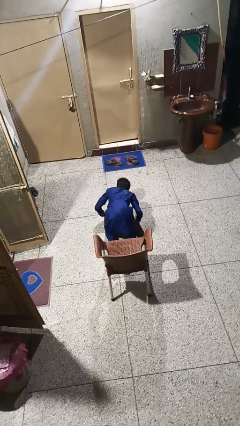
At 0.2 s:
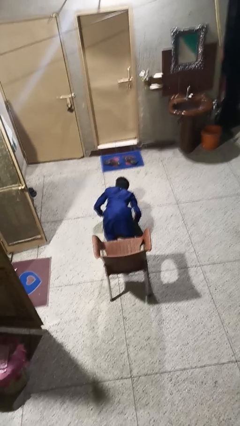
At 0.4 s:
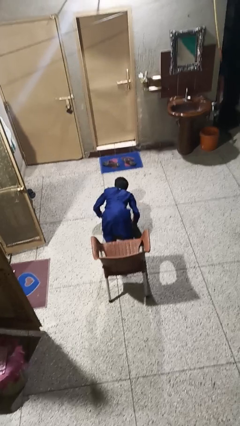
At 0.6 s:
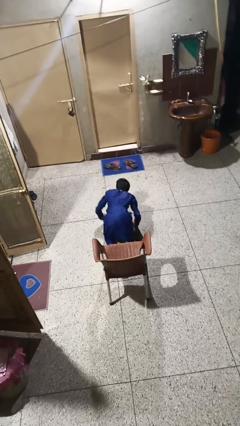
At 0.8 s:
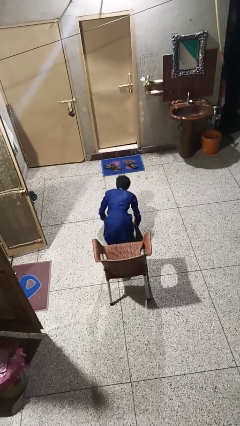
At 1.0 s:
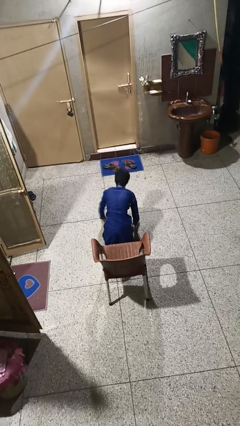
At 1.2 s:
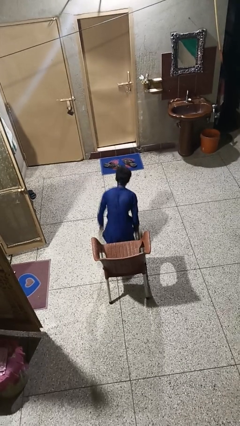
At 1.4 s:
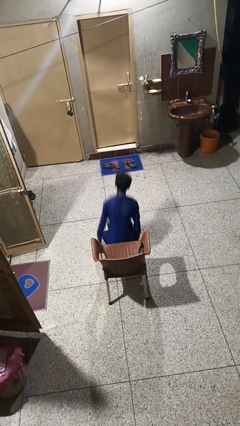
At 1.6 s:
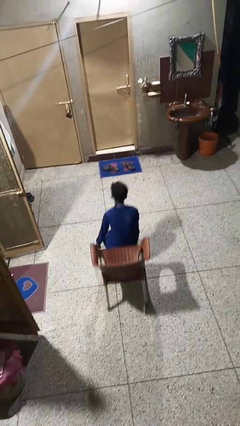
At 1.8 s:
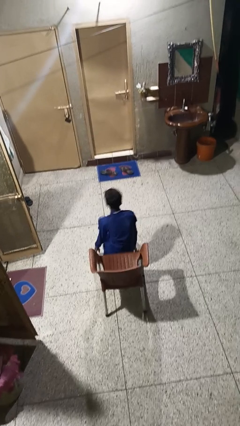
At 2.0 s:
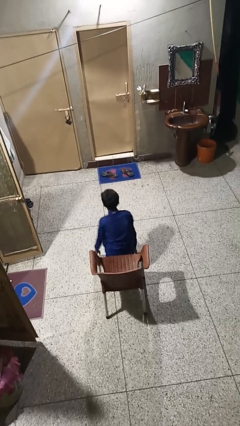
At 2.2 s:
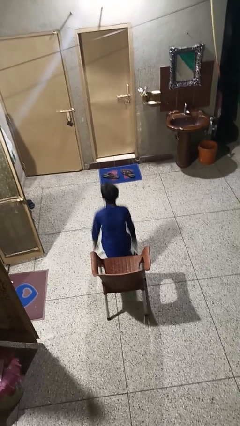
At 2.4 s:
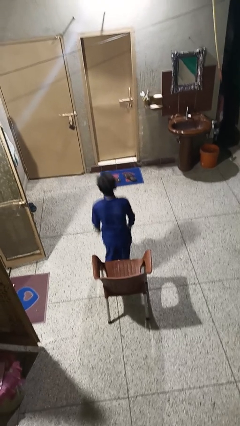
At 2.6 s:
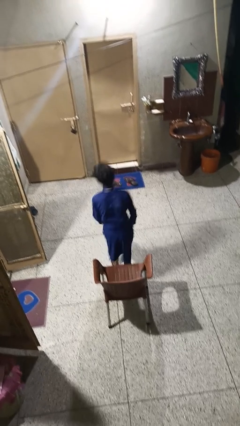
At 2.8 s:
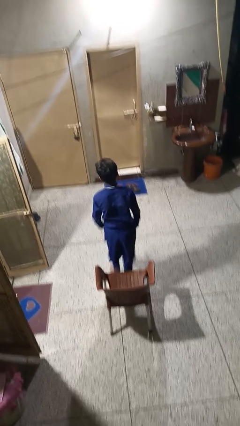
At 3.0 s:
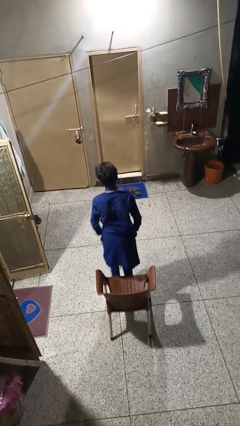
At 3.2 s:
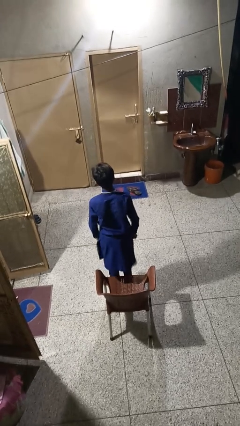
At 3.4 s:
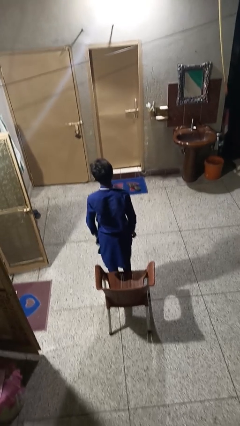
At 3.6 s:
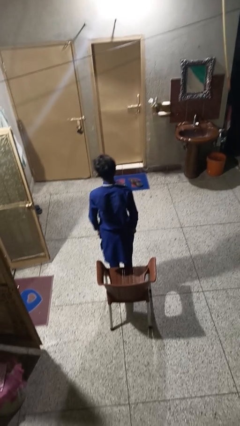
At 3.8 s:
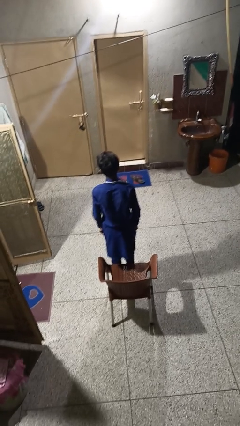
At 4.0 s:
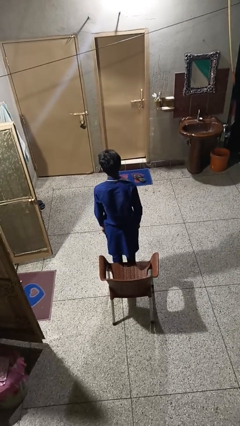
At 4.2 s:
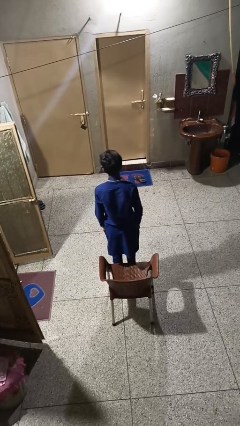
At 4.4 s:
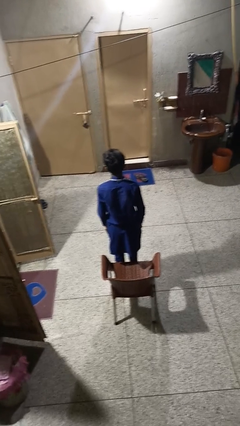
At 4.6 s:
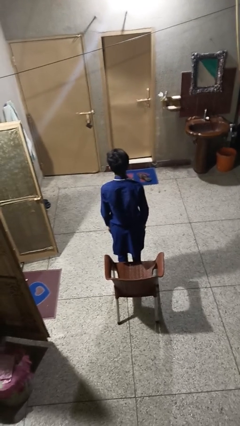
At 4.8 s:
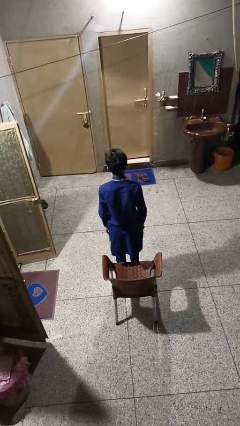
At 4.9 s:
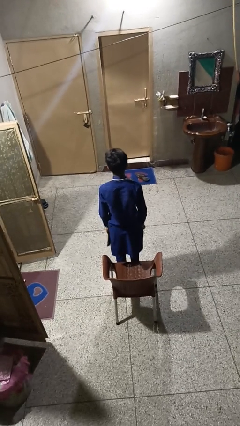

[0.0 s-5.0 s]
person stands up from floor

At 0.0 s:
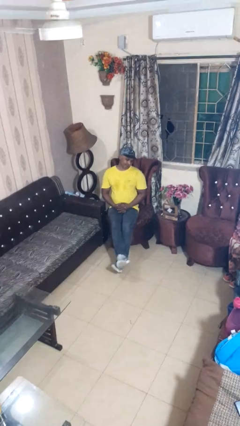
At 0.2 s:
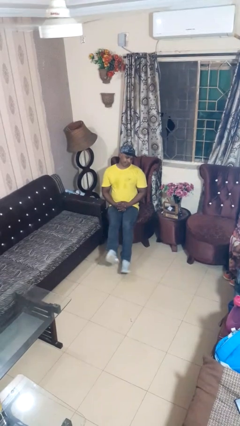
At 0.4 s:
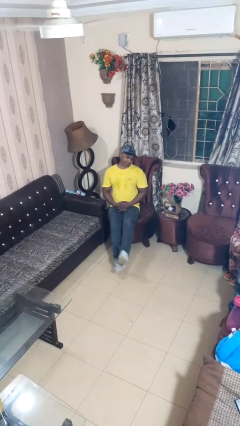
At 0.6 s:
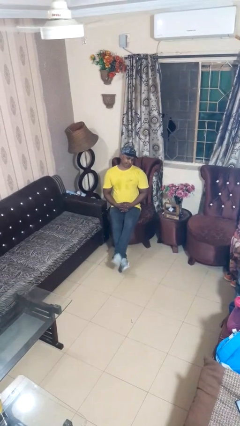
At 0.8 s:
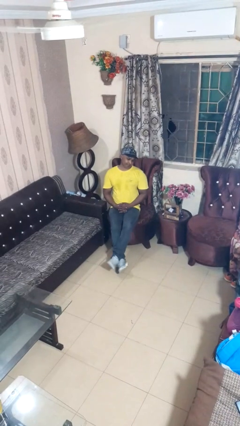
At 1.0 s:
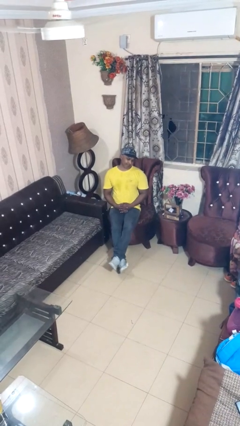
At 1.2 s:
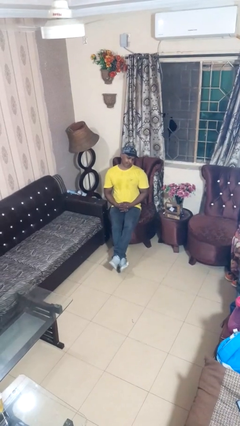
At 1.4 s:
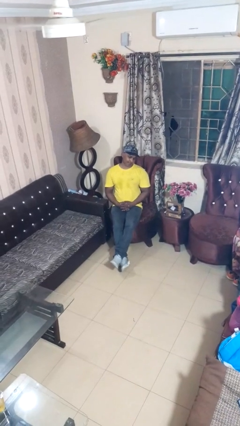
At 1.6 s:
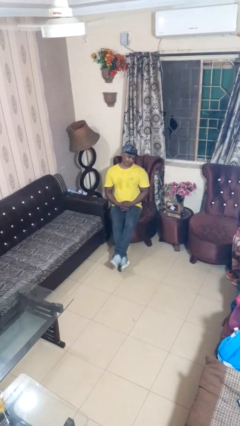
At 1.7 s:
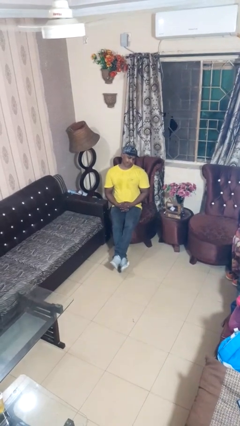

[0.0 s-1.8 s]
person crosses legs

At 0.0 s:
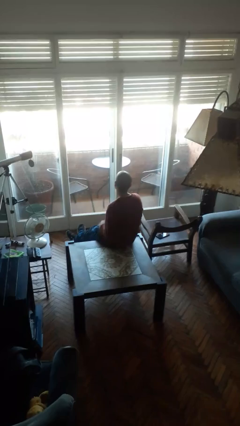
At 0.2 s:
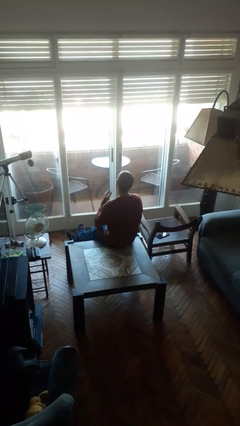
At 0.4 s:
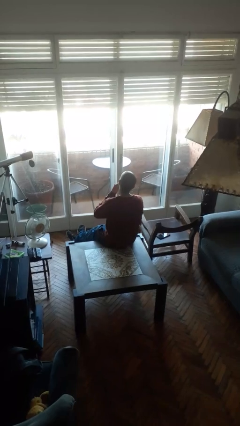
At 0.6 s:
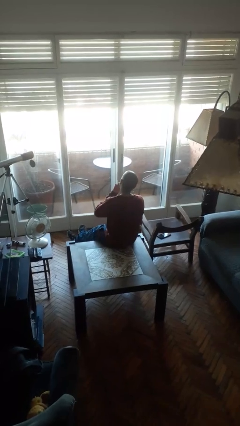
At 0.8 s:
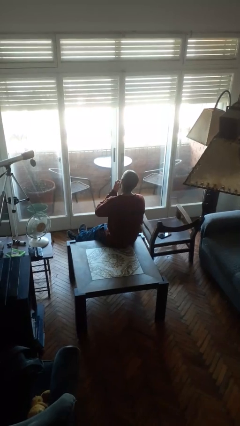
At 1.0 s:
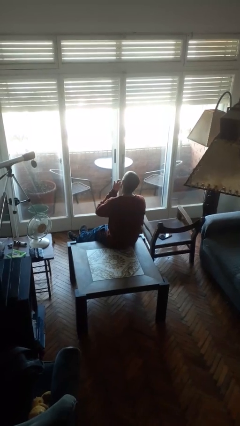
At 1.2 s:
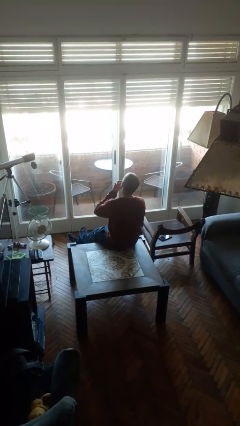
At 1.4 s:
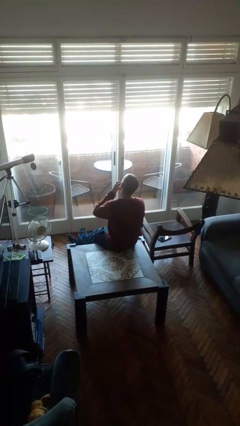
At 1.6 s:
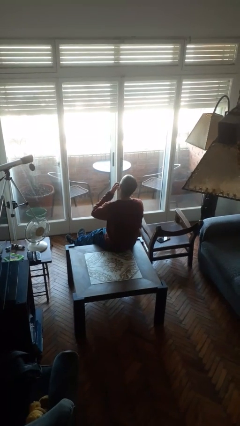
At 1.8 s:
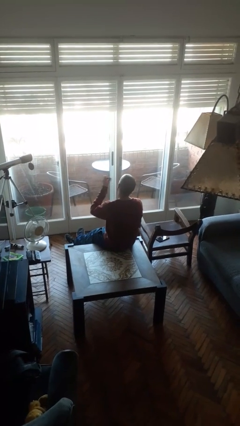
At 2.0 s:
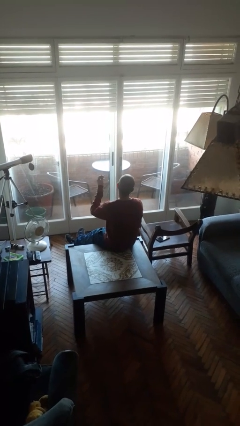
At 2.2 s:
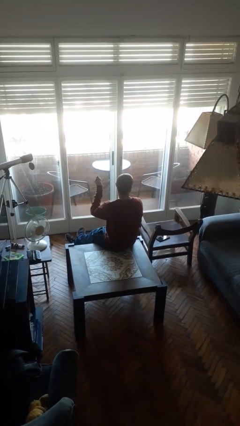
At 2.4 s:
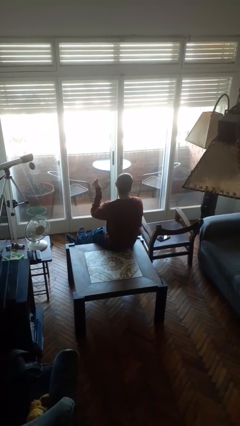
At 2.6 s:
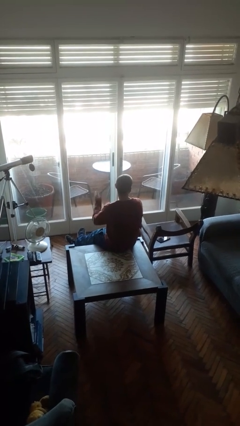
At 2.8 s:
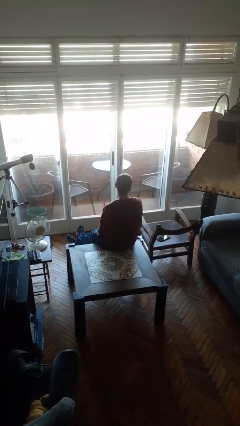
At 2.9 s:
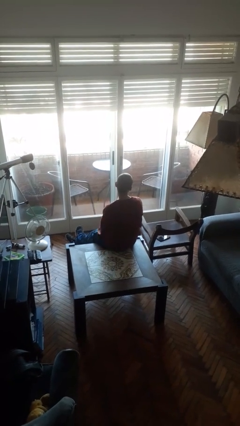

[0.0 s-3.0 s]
person licks fingers

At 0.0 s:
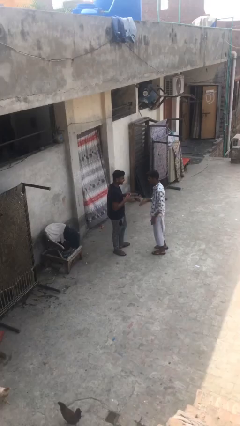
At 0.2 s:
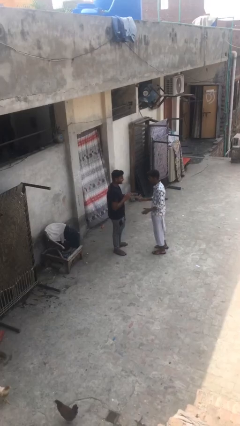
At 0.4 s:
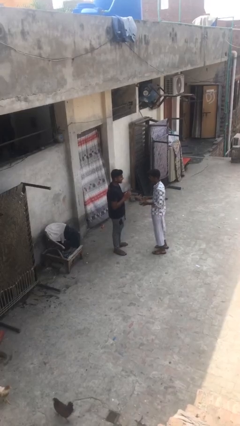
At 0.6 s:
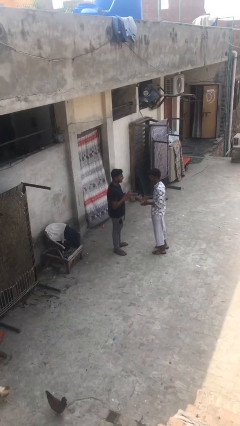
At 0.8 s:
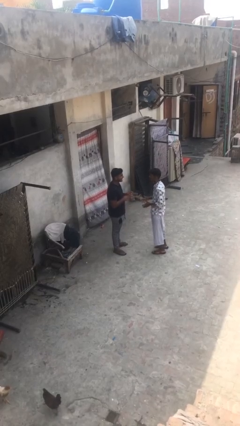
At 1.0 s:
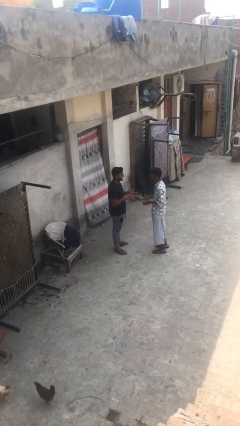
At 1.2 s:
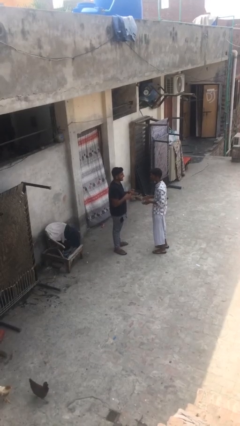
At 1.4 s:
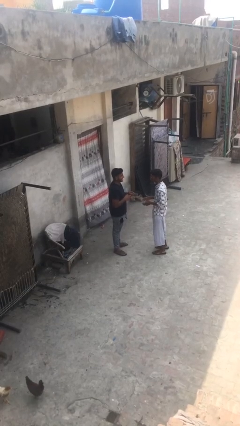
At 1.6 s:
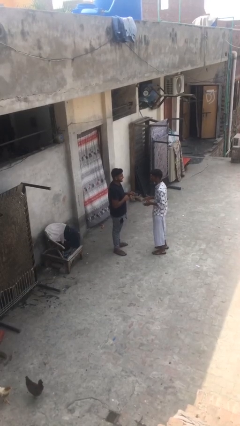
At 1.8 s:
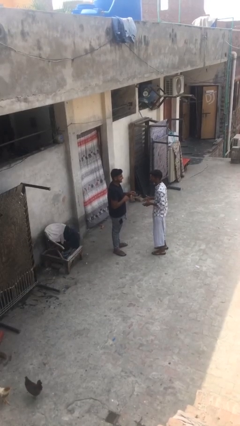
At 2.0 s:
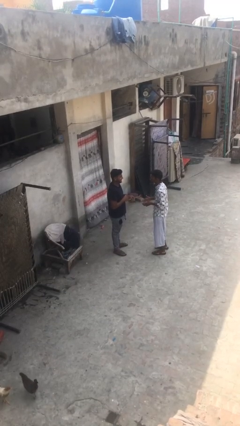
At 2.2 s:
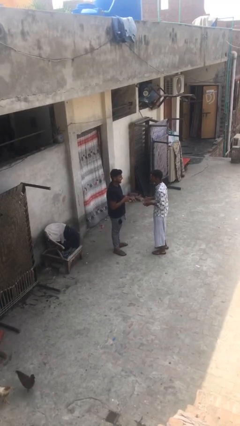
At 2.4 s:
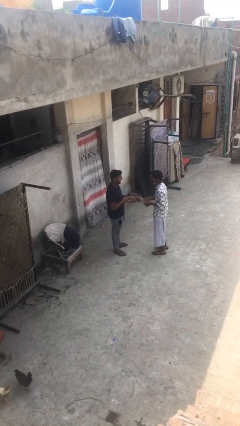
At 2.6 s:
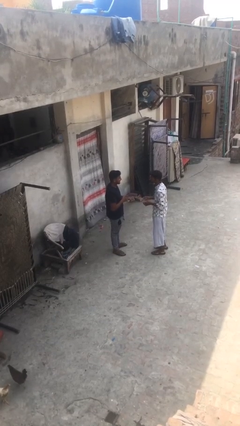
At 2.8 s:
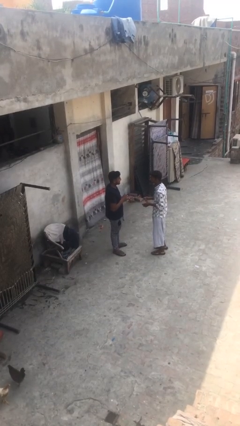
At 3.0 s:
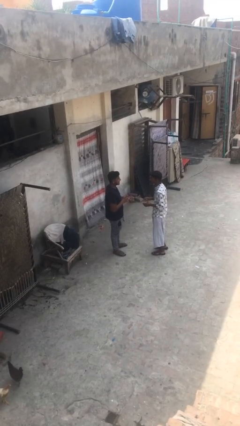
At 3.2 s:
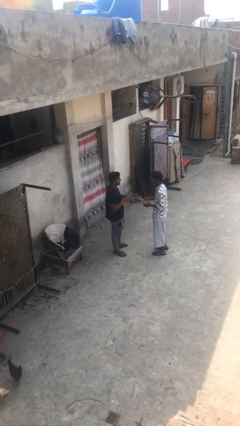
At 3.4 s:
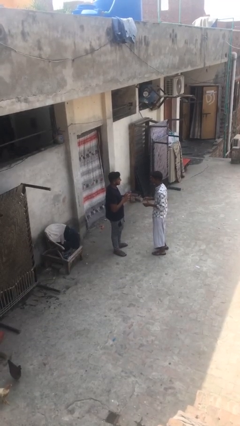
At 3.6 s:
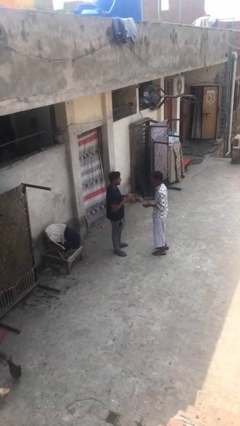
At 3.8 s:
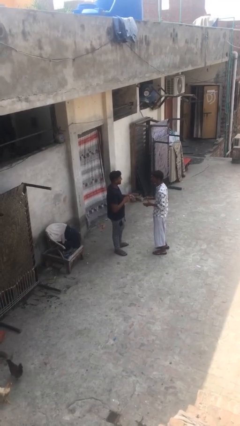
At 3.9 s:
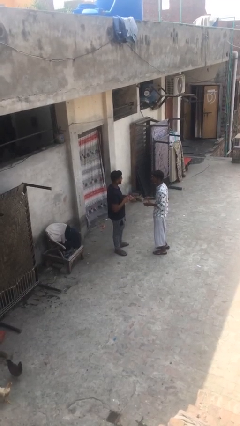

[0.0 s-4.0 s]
person talks to person

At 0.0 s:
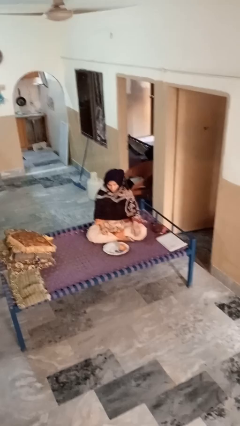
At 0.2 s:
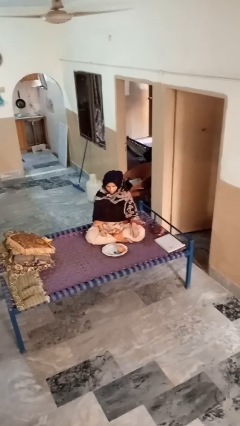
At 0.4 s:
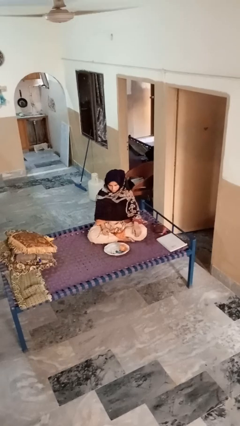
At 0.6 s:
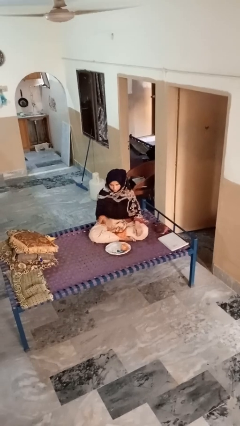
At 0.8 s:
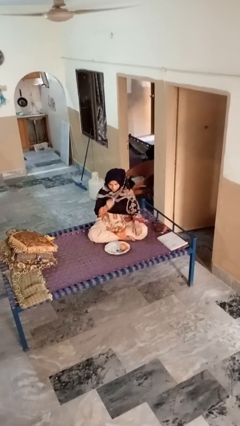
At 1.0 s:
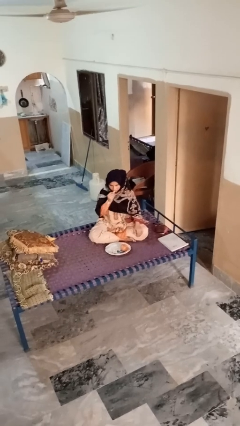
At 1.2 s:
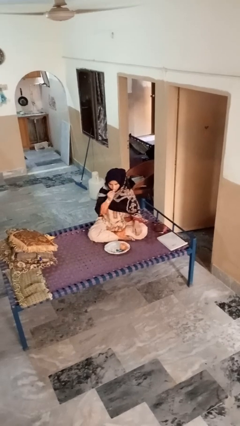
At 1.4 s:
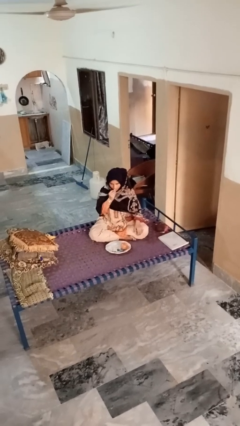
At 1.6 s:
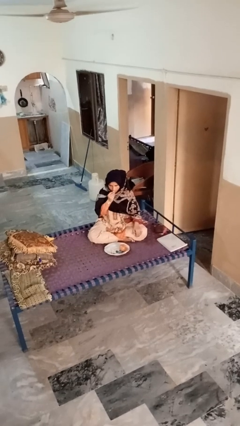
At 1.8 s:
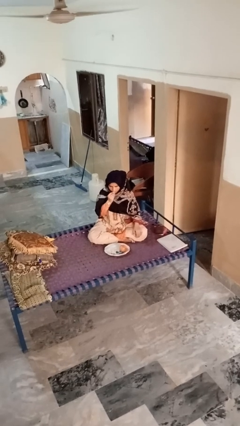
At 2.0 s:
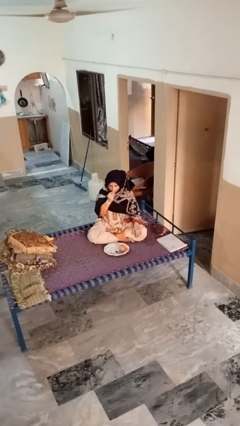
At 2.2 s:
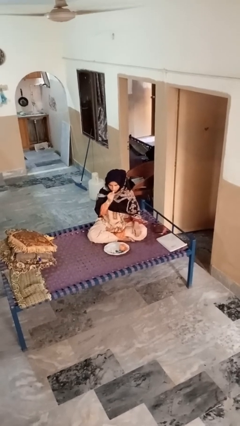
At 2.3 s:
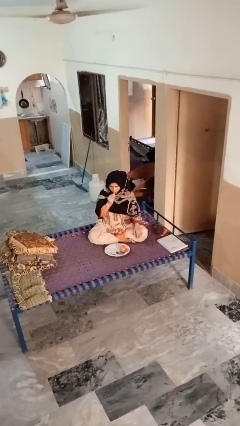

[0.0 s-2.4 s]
person eats apple

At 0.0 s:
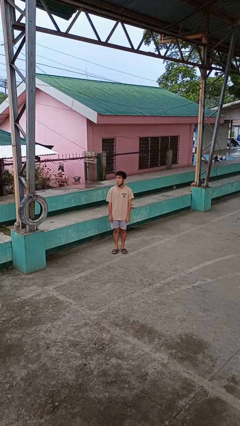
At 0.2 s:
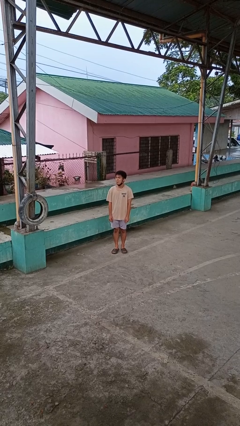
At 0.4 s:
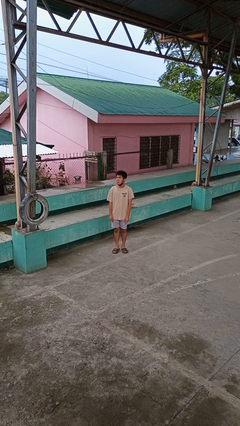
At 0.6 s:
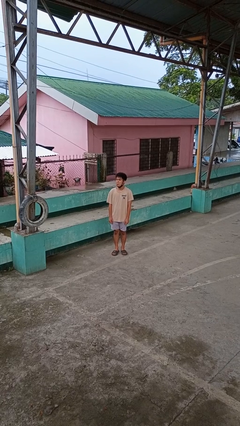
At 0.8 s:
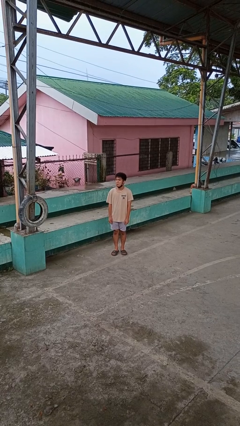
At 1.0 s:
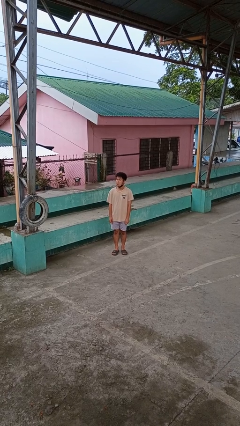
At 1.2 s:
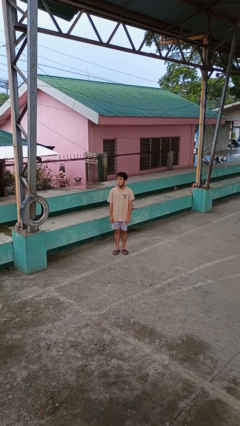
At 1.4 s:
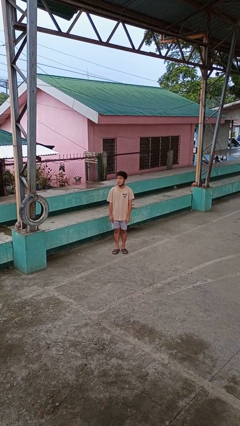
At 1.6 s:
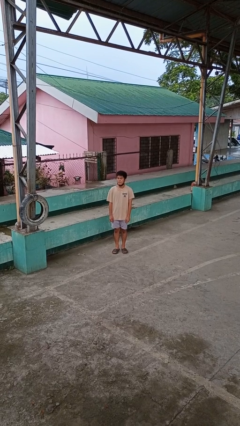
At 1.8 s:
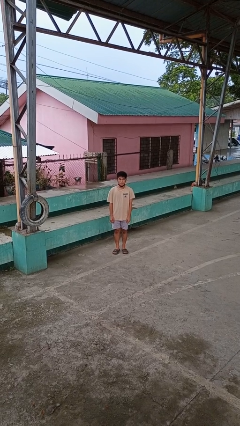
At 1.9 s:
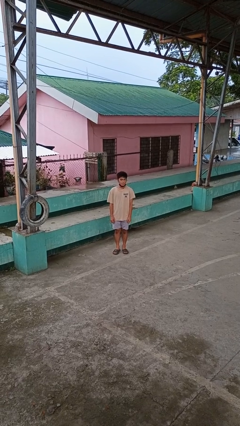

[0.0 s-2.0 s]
person sticks out tongue
